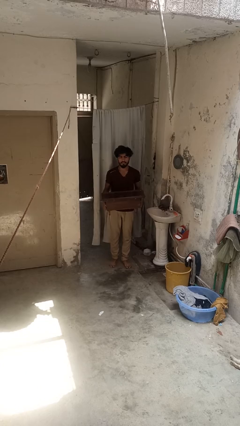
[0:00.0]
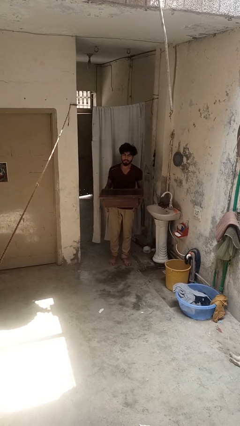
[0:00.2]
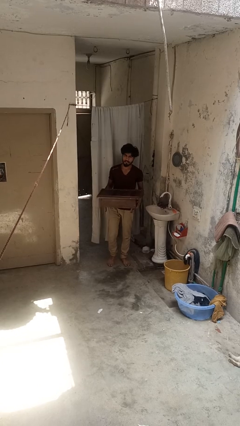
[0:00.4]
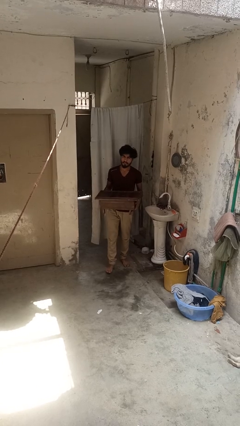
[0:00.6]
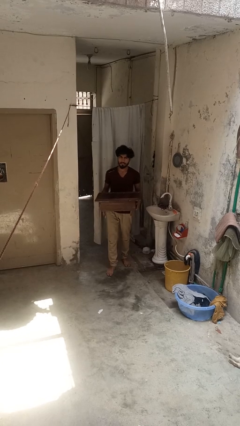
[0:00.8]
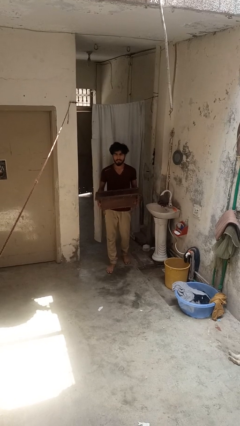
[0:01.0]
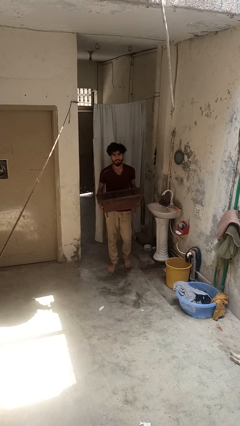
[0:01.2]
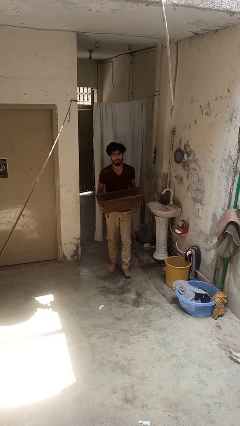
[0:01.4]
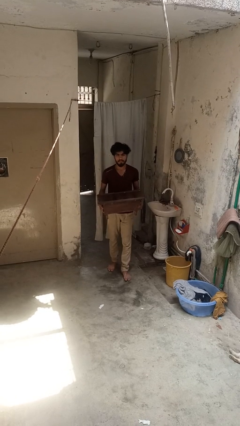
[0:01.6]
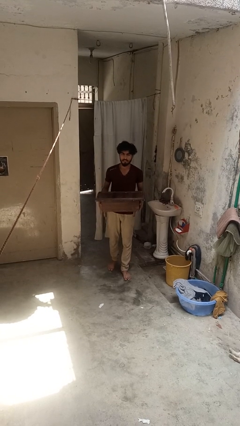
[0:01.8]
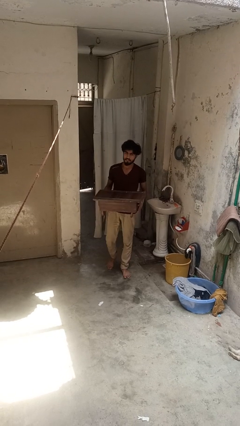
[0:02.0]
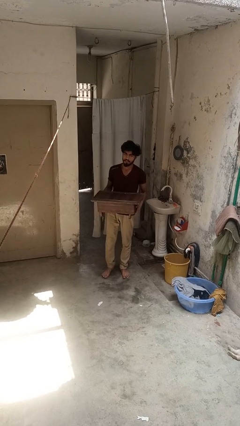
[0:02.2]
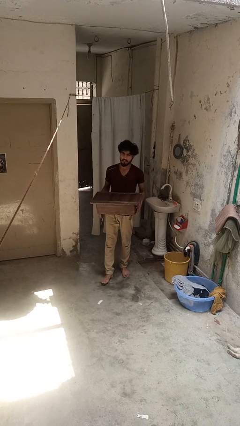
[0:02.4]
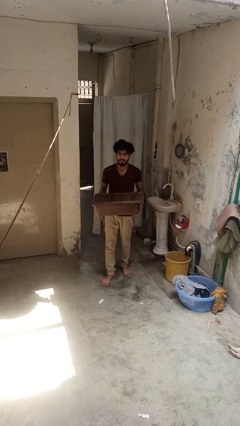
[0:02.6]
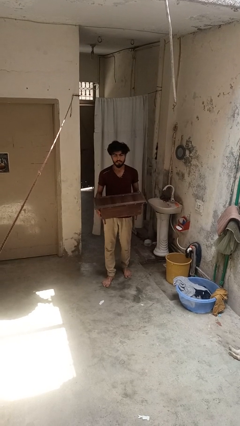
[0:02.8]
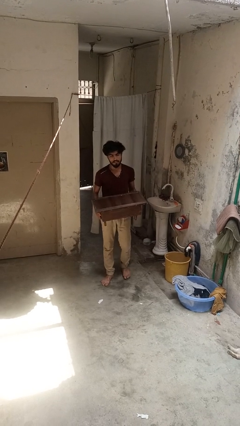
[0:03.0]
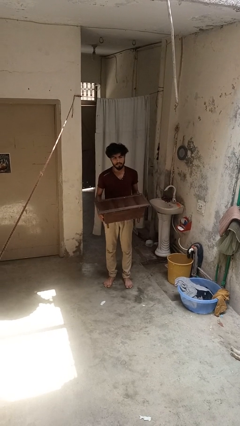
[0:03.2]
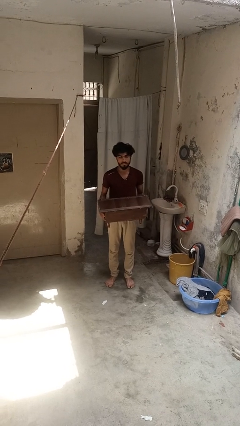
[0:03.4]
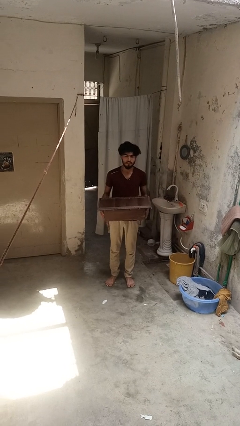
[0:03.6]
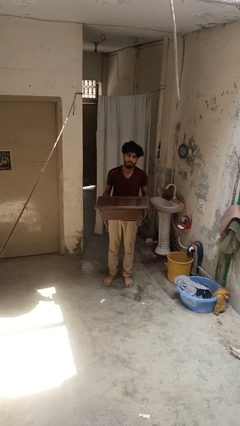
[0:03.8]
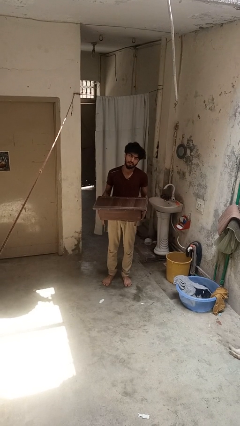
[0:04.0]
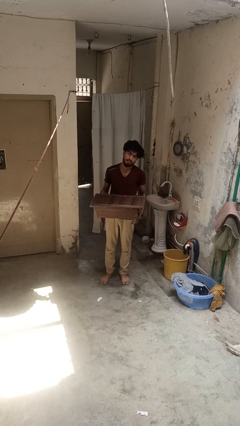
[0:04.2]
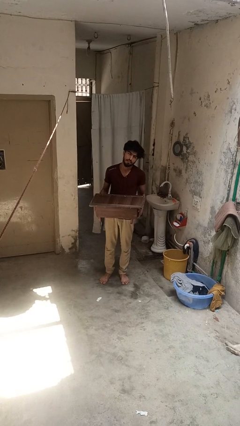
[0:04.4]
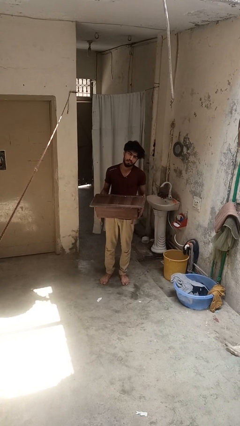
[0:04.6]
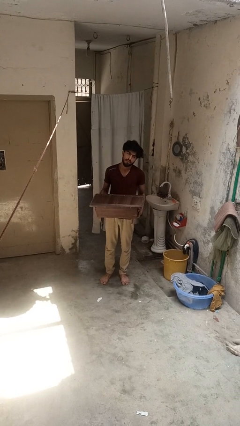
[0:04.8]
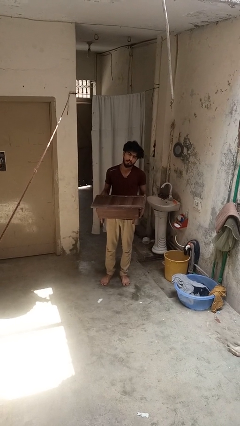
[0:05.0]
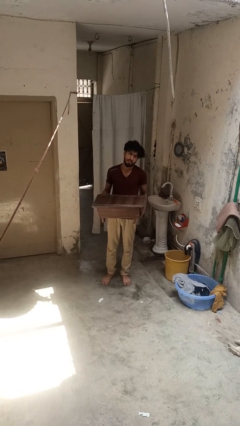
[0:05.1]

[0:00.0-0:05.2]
person carries furniture

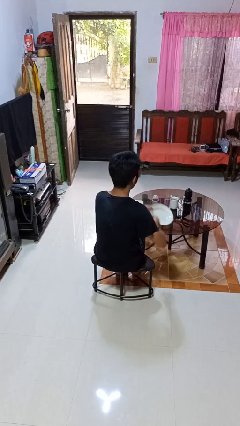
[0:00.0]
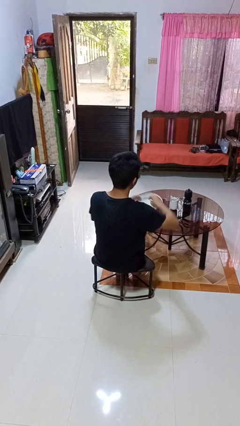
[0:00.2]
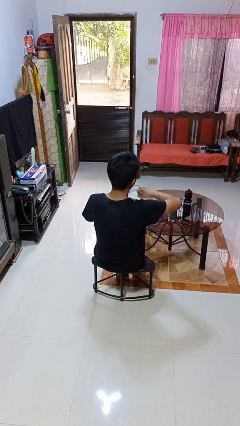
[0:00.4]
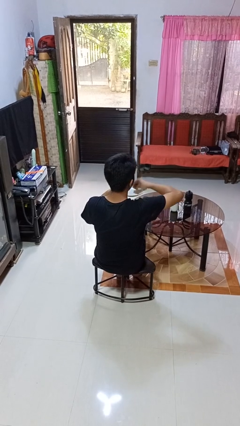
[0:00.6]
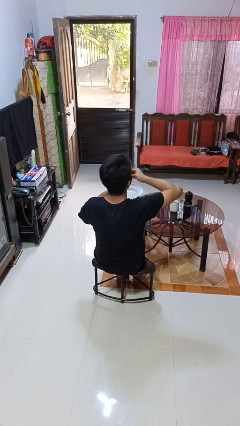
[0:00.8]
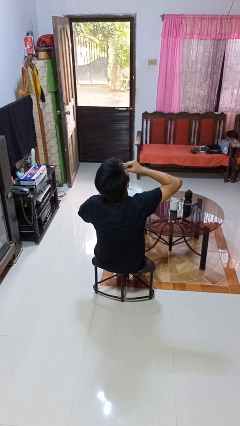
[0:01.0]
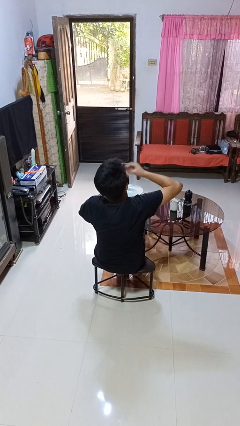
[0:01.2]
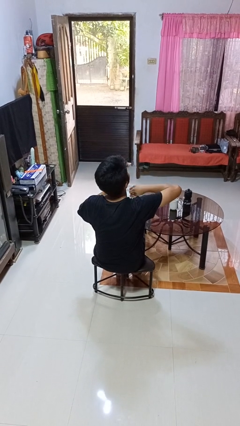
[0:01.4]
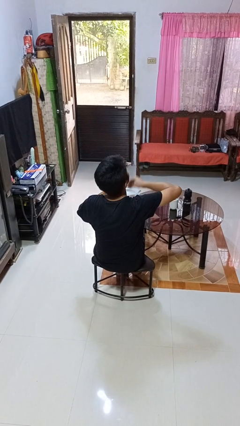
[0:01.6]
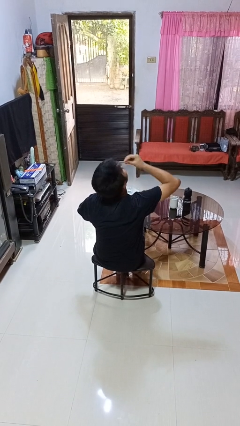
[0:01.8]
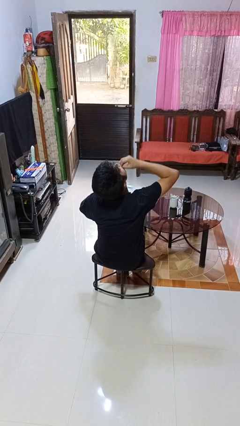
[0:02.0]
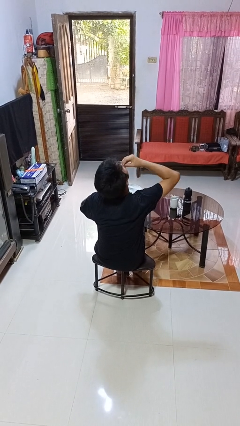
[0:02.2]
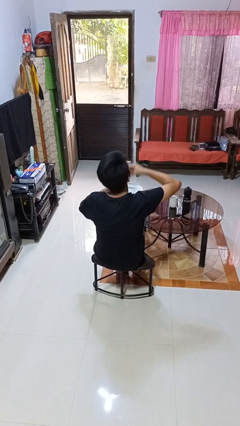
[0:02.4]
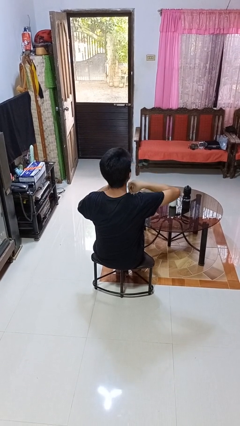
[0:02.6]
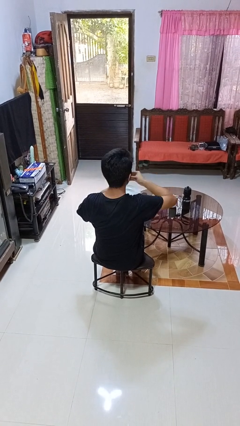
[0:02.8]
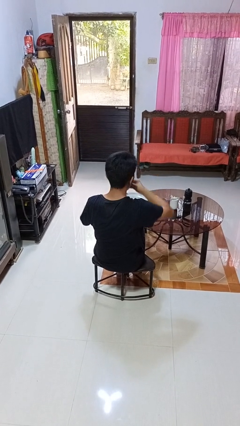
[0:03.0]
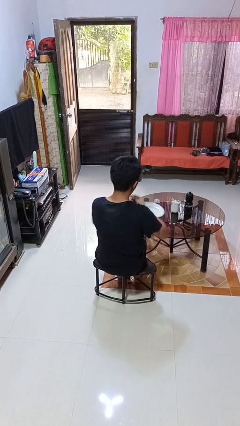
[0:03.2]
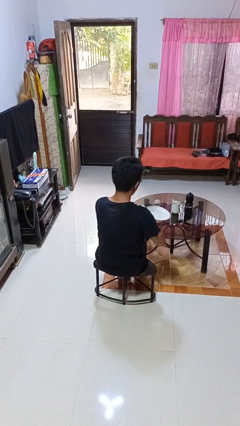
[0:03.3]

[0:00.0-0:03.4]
person eats with hands

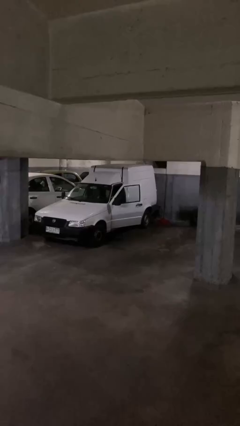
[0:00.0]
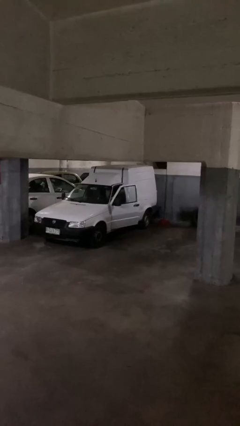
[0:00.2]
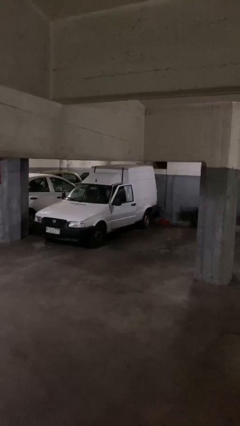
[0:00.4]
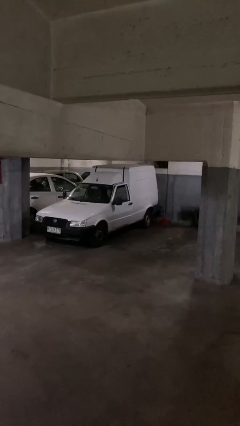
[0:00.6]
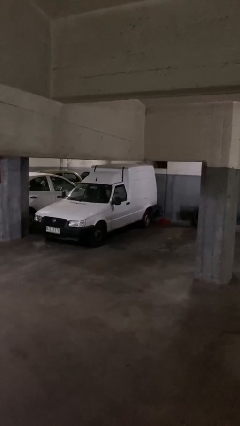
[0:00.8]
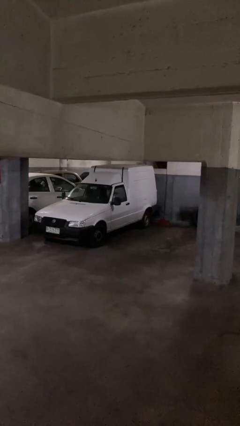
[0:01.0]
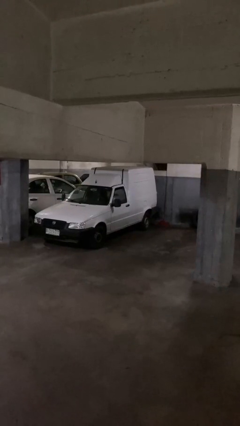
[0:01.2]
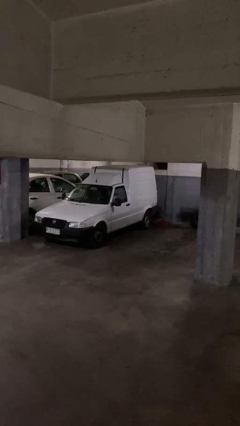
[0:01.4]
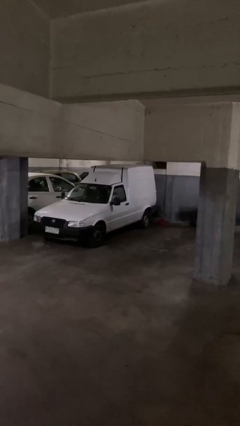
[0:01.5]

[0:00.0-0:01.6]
person closes car door

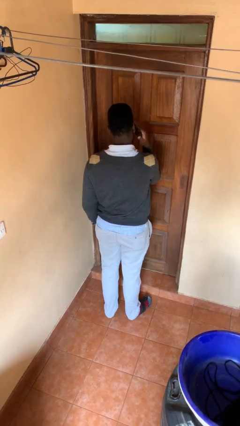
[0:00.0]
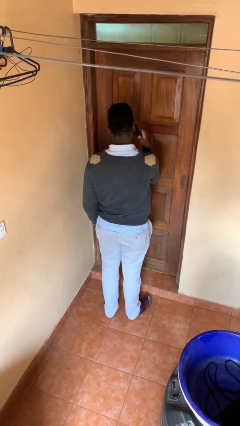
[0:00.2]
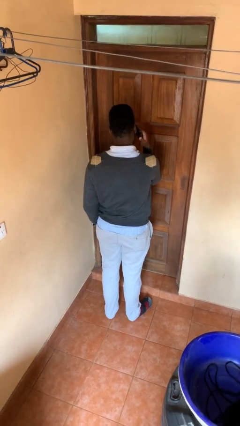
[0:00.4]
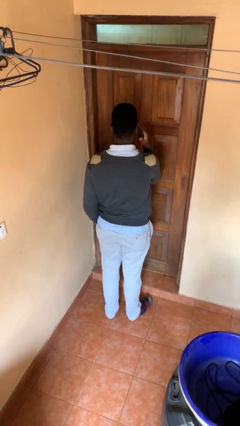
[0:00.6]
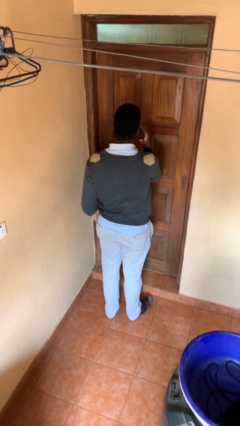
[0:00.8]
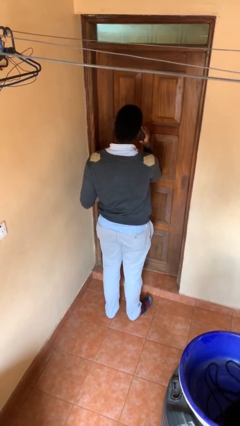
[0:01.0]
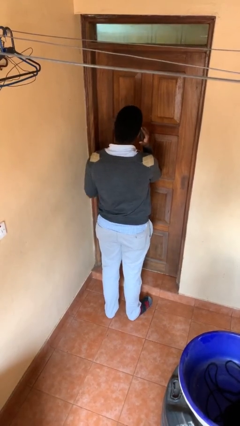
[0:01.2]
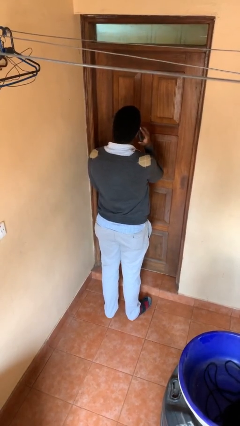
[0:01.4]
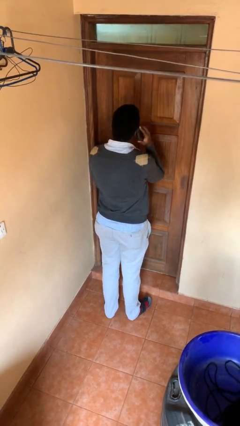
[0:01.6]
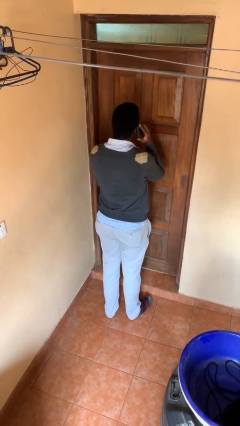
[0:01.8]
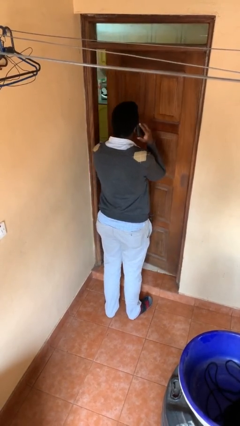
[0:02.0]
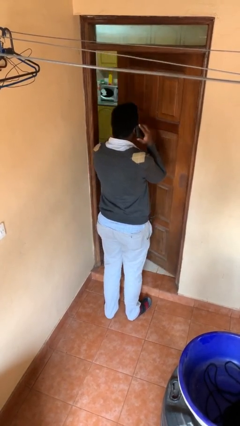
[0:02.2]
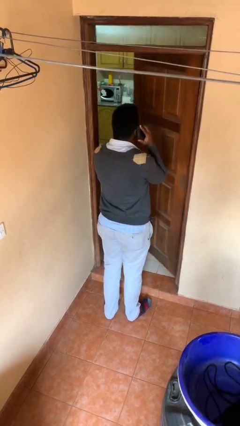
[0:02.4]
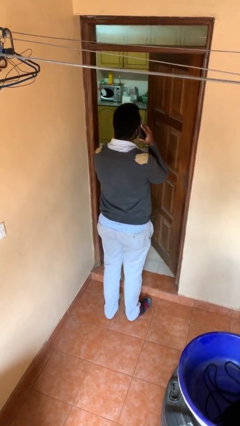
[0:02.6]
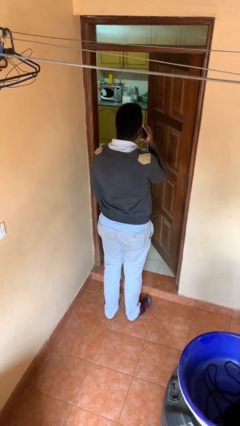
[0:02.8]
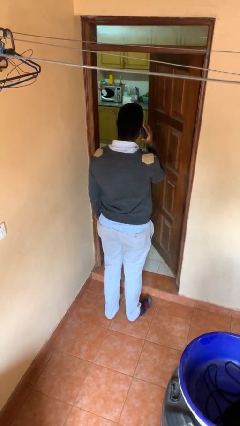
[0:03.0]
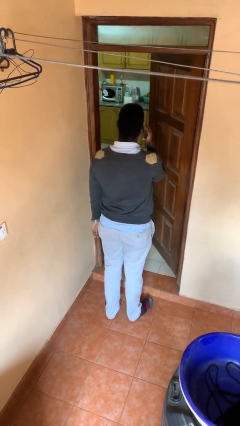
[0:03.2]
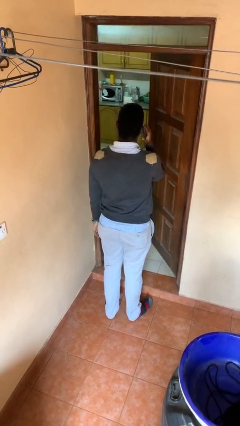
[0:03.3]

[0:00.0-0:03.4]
person opens facility door

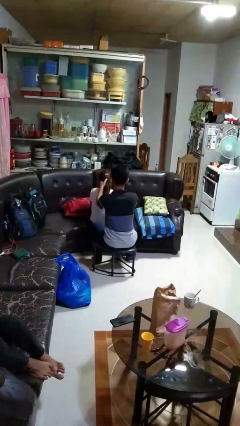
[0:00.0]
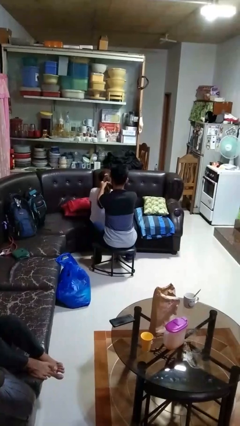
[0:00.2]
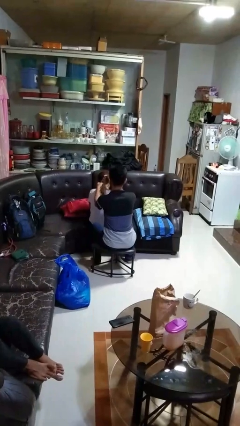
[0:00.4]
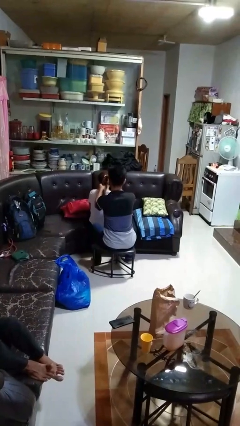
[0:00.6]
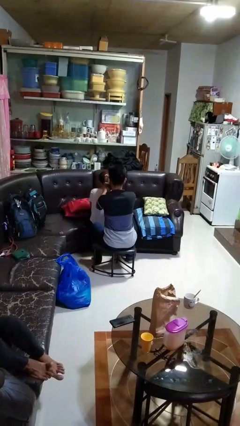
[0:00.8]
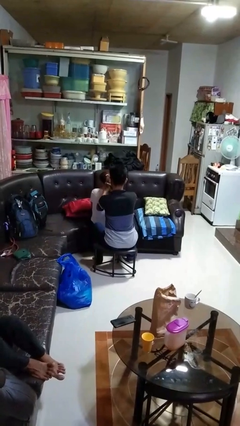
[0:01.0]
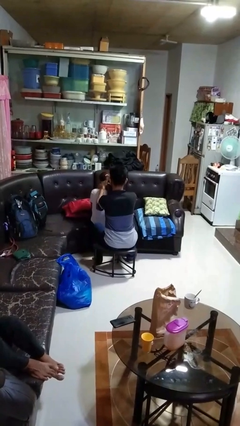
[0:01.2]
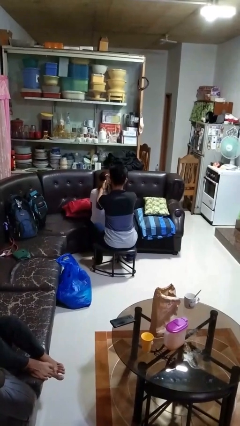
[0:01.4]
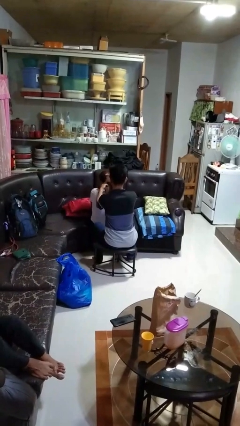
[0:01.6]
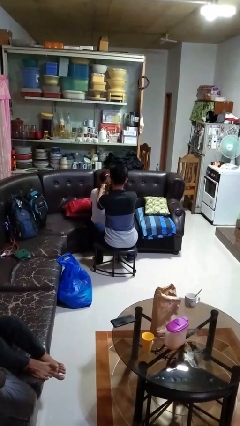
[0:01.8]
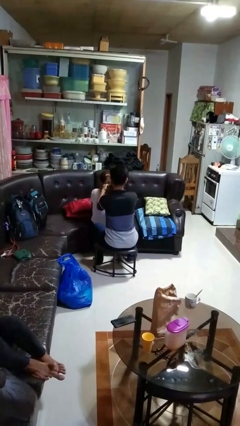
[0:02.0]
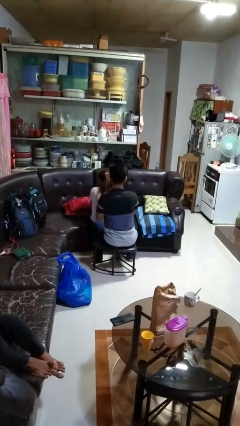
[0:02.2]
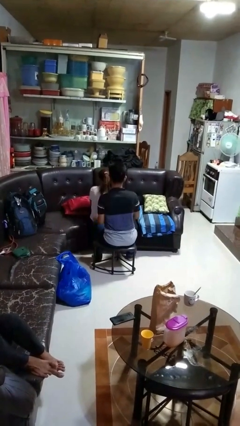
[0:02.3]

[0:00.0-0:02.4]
person braids hair of person

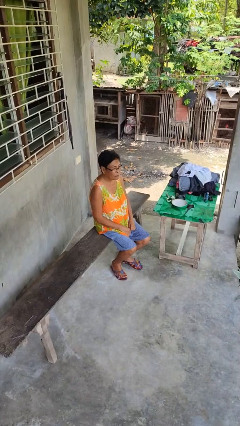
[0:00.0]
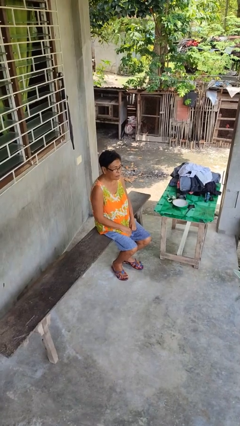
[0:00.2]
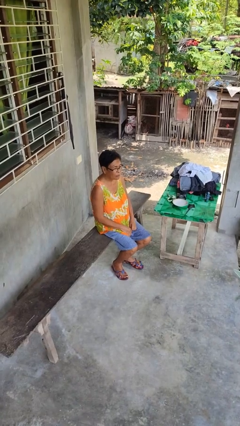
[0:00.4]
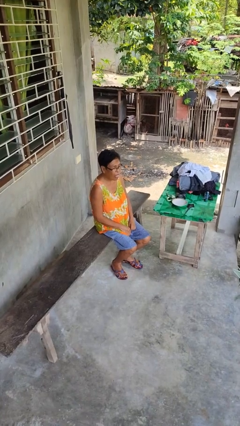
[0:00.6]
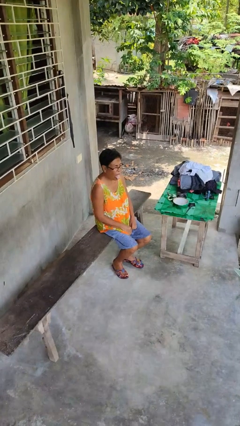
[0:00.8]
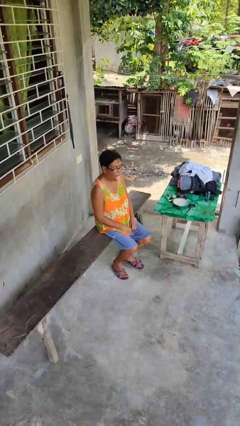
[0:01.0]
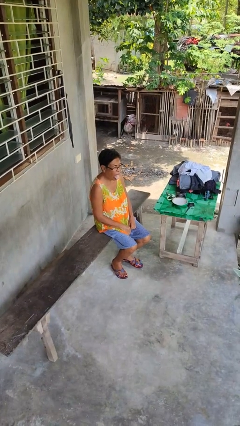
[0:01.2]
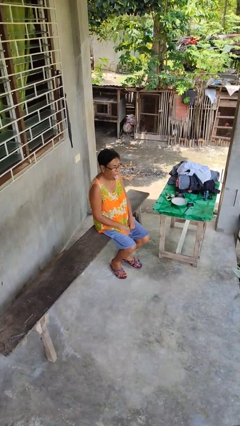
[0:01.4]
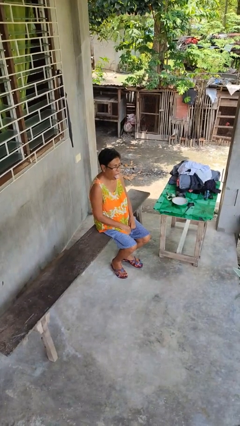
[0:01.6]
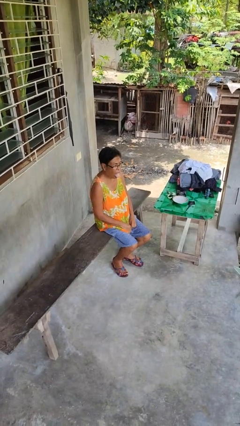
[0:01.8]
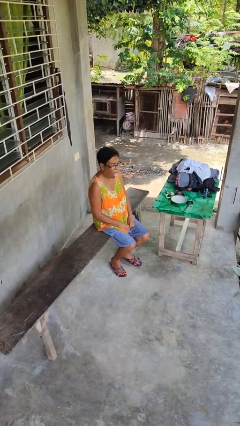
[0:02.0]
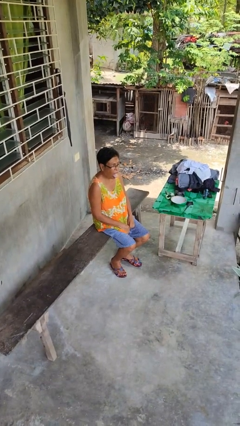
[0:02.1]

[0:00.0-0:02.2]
person sticks out tongue
